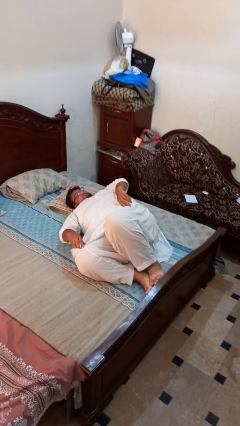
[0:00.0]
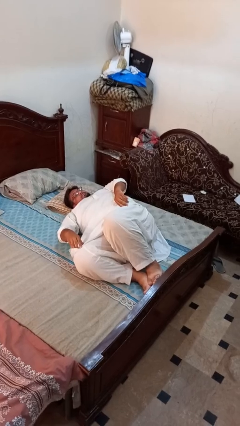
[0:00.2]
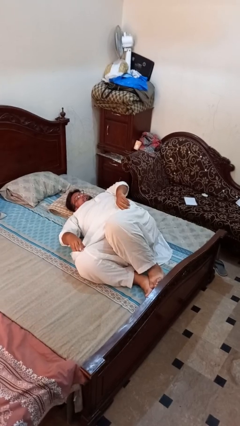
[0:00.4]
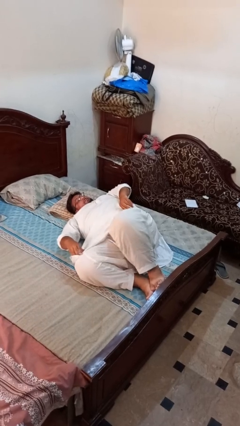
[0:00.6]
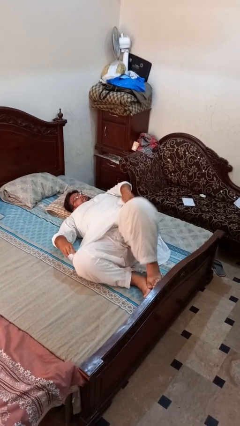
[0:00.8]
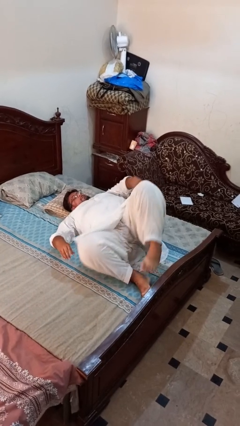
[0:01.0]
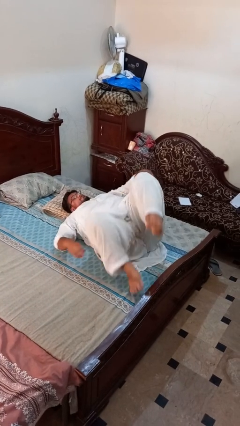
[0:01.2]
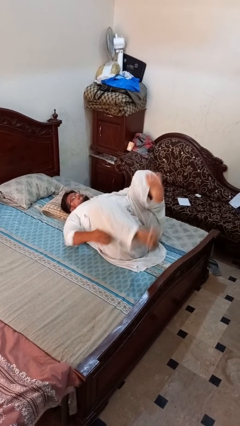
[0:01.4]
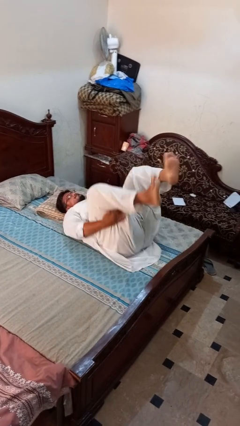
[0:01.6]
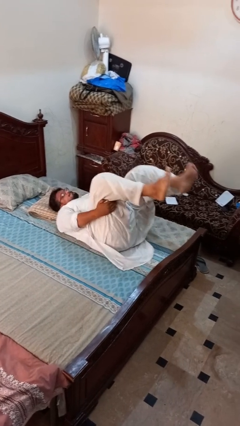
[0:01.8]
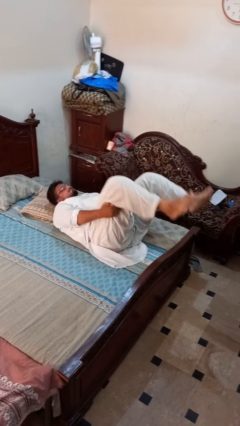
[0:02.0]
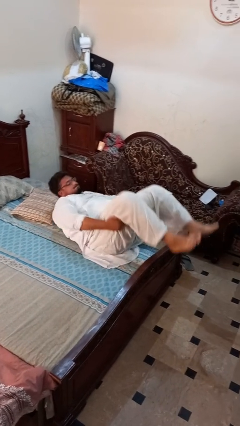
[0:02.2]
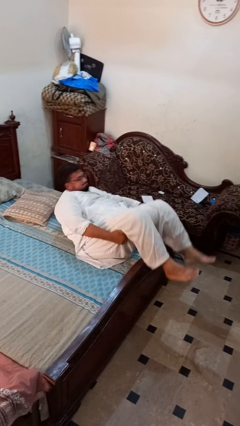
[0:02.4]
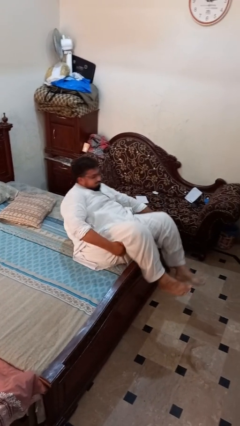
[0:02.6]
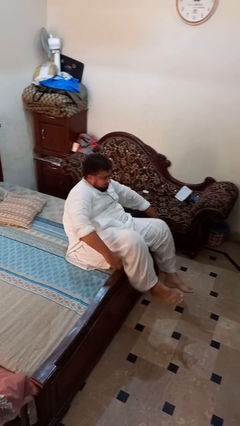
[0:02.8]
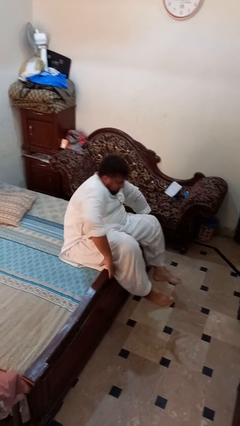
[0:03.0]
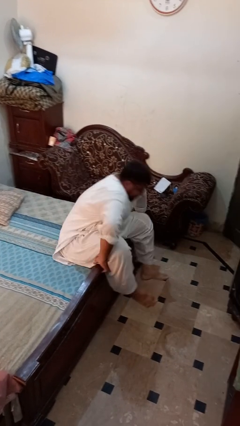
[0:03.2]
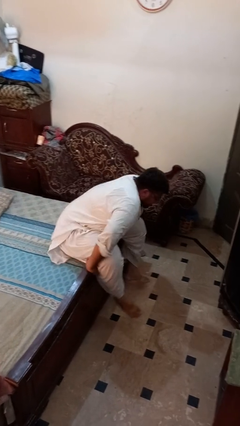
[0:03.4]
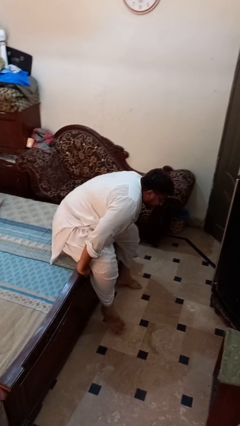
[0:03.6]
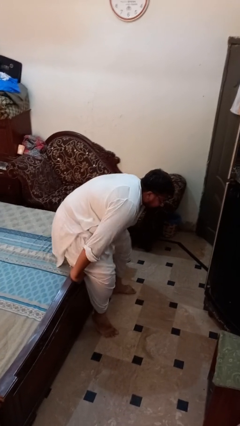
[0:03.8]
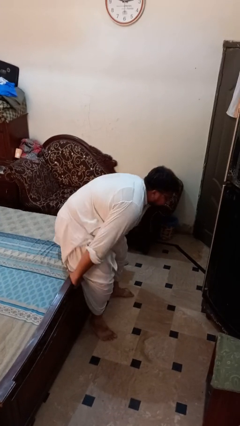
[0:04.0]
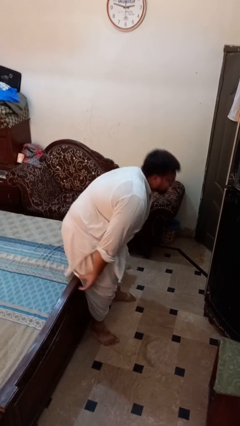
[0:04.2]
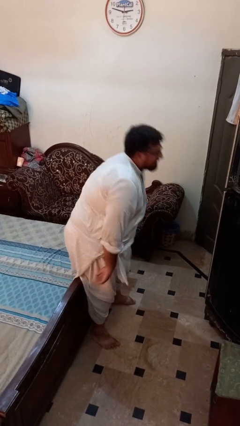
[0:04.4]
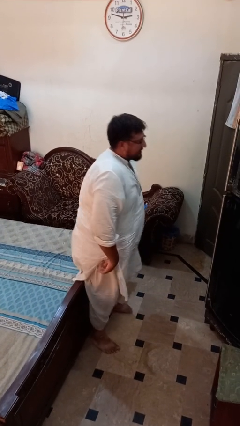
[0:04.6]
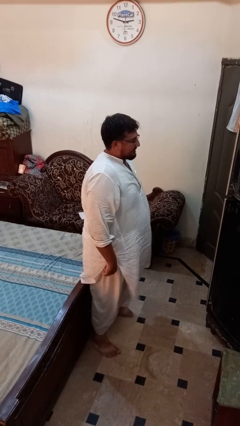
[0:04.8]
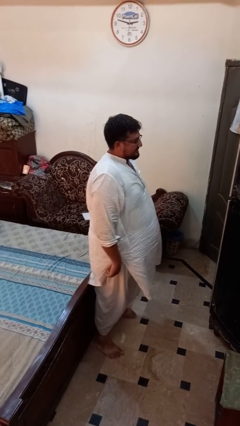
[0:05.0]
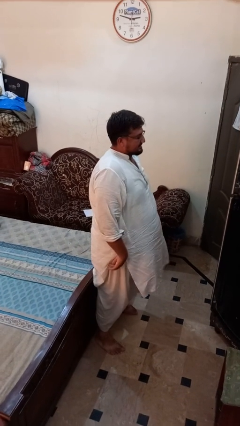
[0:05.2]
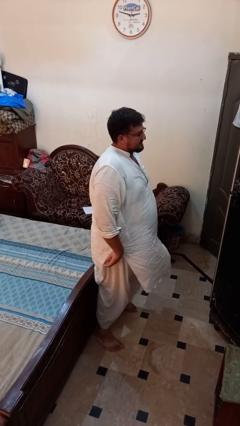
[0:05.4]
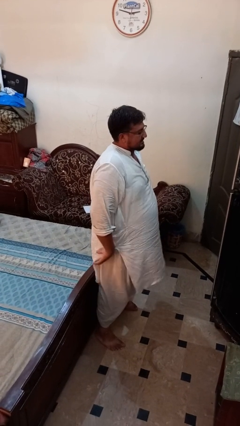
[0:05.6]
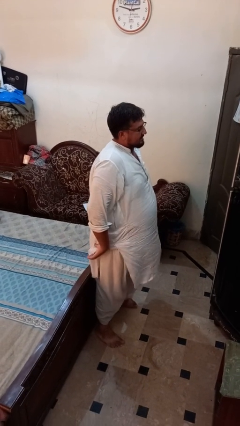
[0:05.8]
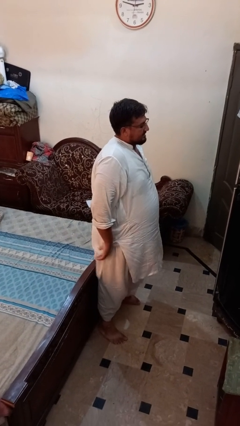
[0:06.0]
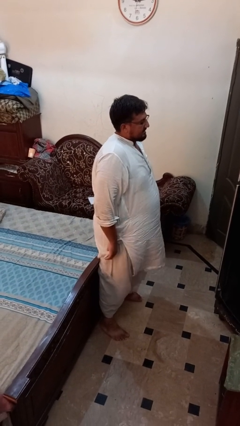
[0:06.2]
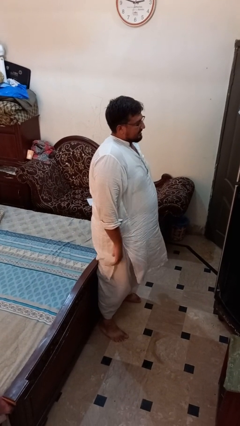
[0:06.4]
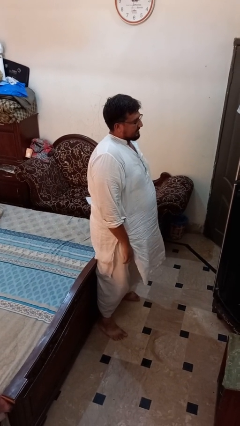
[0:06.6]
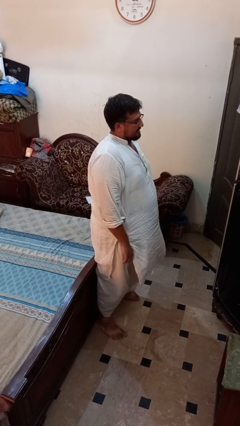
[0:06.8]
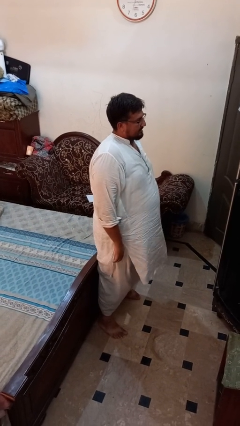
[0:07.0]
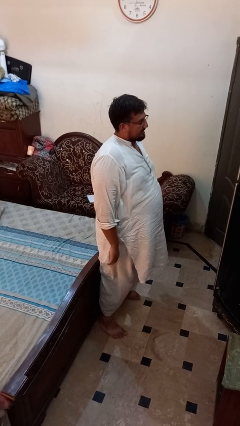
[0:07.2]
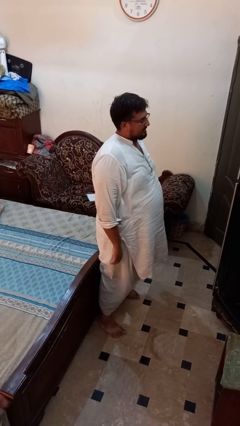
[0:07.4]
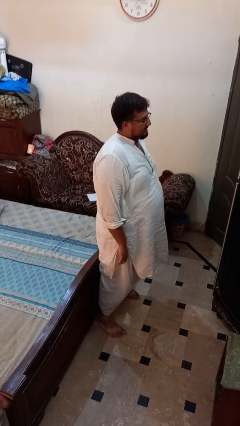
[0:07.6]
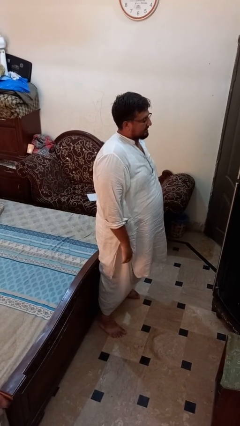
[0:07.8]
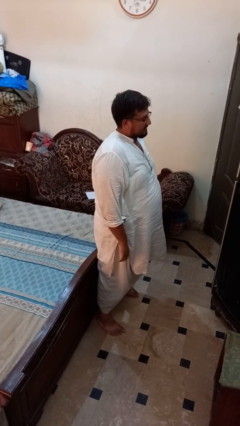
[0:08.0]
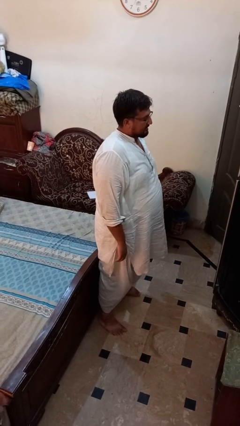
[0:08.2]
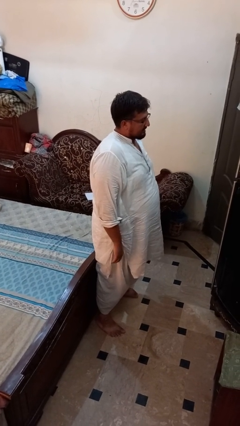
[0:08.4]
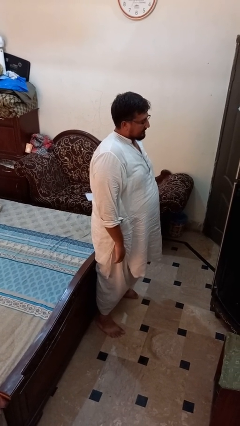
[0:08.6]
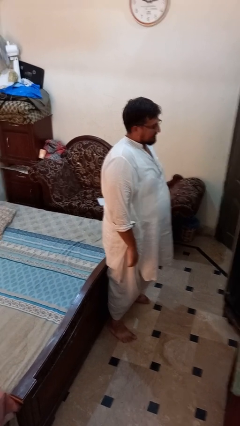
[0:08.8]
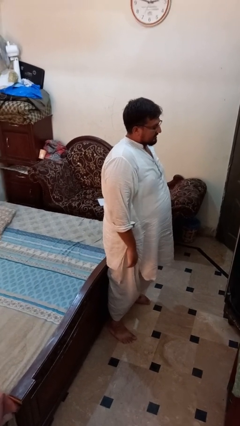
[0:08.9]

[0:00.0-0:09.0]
person stands up

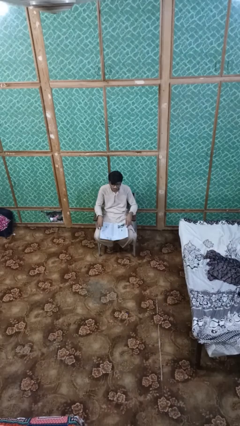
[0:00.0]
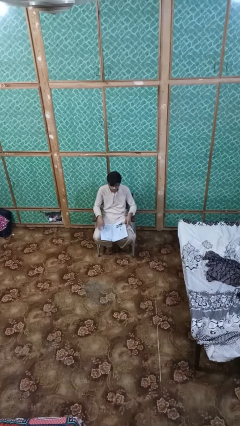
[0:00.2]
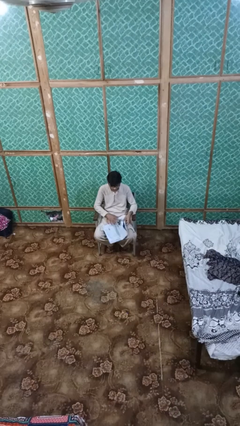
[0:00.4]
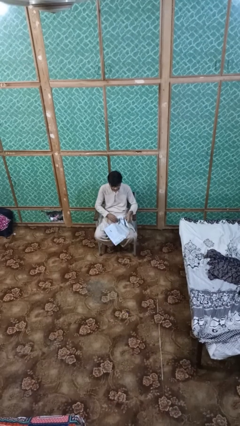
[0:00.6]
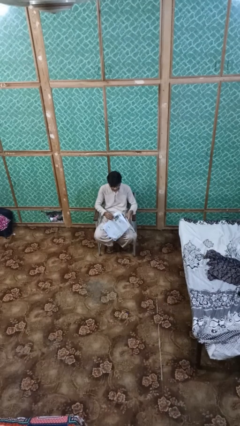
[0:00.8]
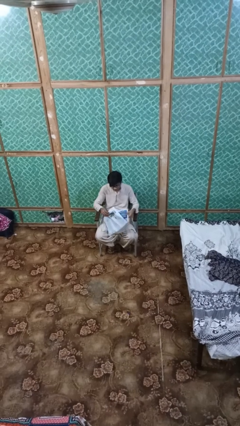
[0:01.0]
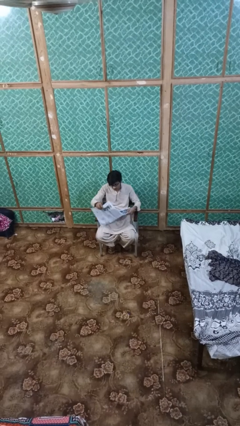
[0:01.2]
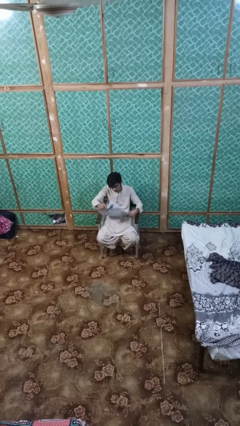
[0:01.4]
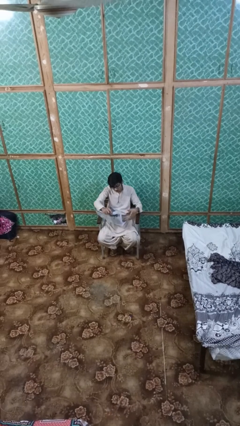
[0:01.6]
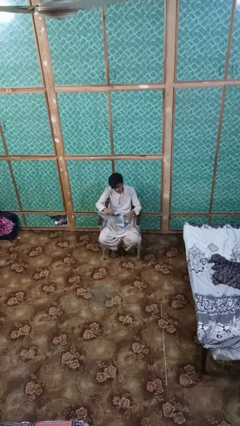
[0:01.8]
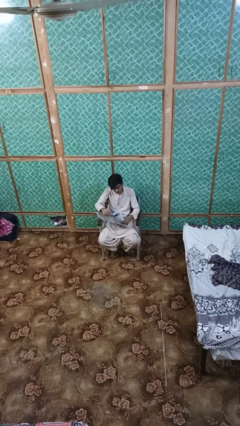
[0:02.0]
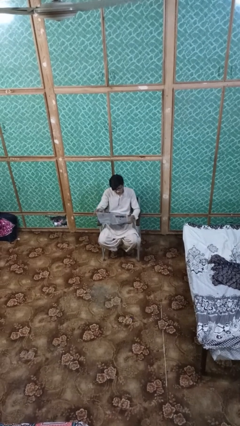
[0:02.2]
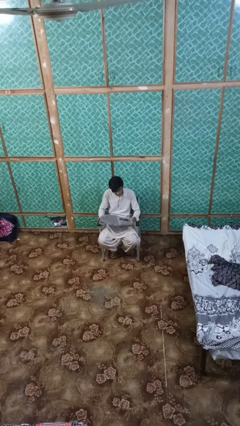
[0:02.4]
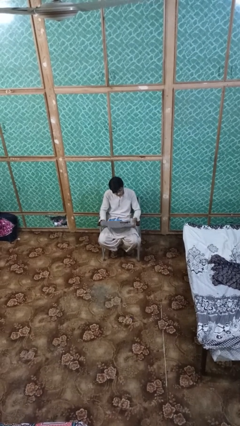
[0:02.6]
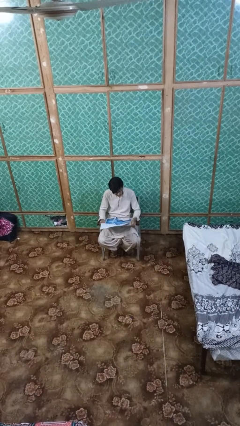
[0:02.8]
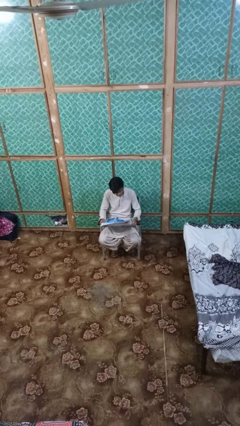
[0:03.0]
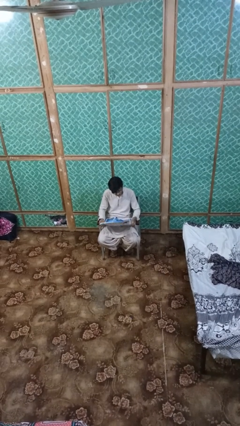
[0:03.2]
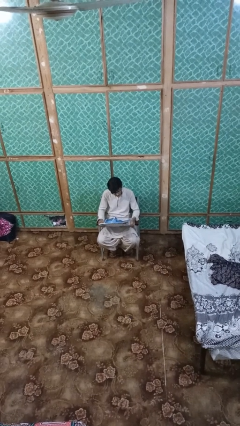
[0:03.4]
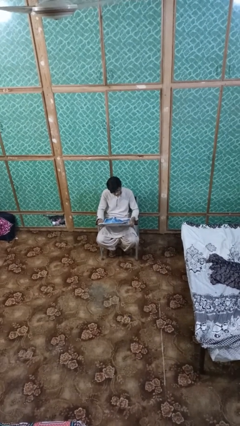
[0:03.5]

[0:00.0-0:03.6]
person reads newspaper

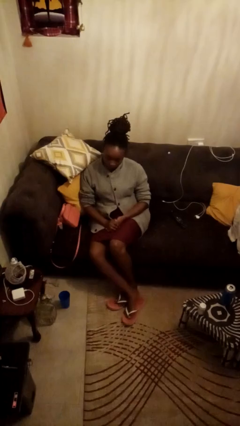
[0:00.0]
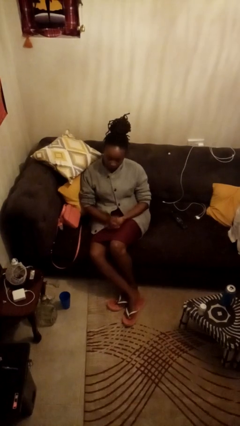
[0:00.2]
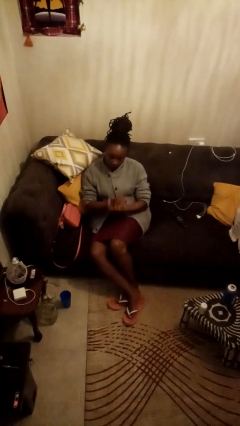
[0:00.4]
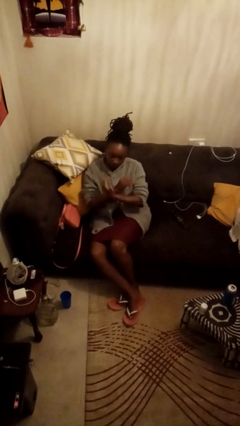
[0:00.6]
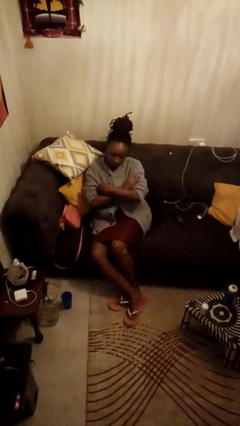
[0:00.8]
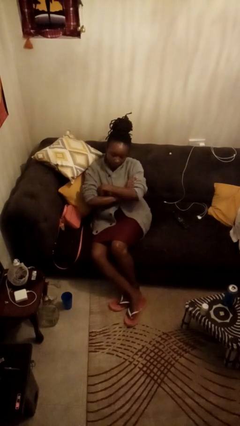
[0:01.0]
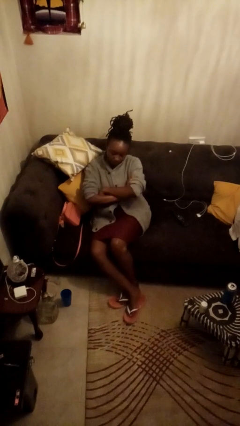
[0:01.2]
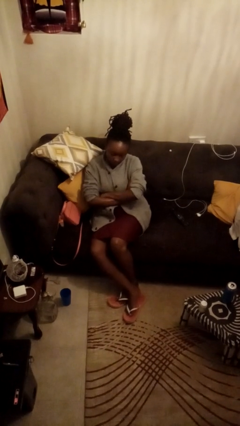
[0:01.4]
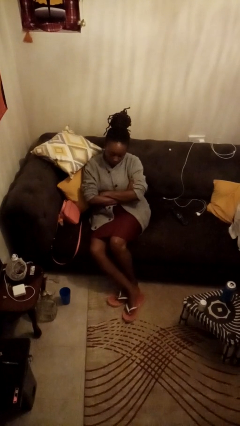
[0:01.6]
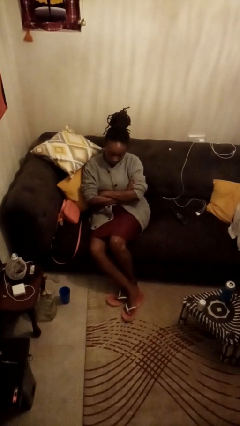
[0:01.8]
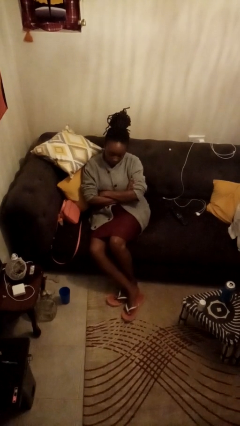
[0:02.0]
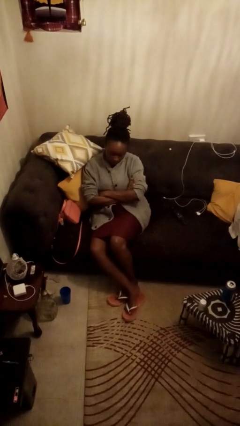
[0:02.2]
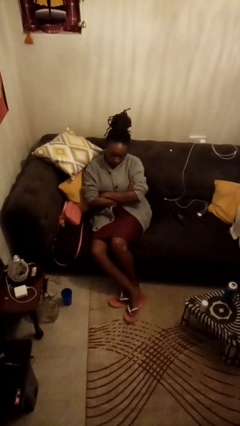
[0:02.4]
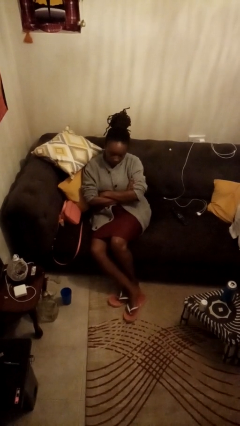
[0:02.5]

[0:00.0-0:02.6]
person crosses arms

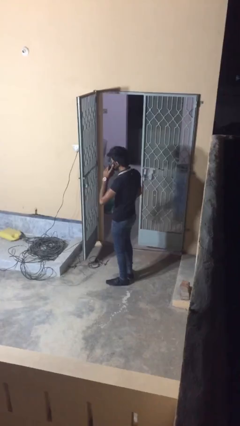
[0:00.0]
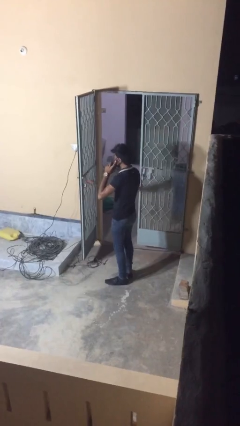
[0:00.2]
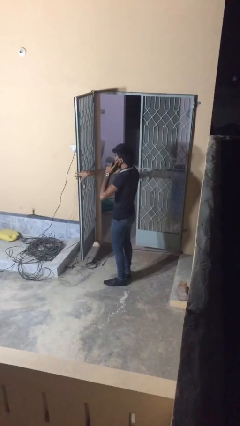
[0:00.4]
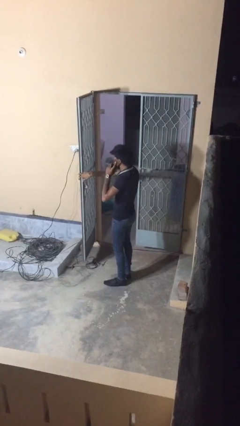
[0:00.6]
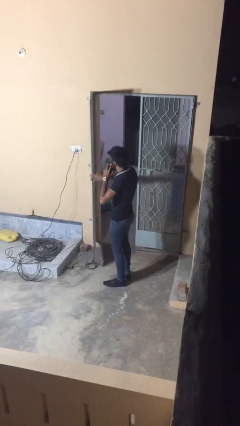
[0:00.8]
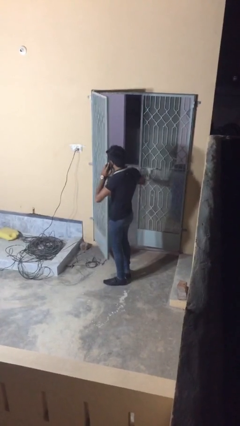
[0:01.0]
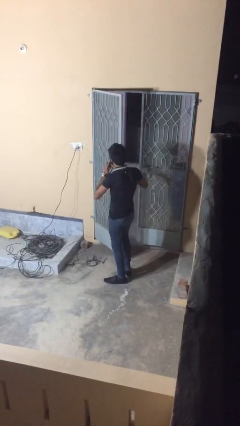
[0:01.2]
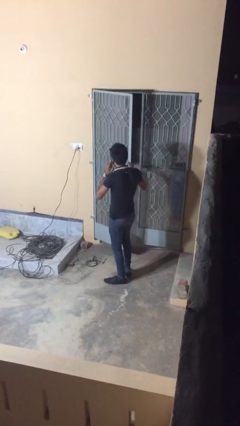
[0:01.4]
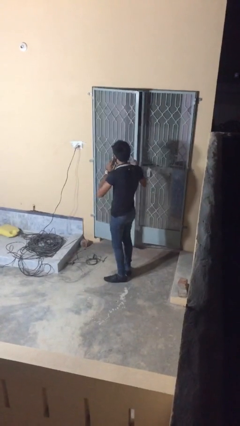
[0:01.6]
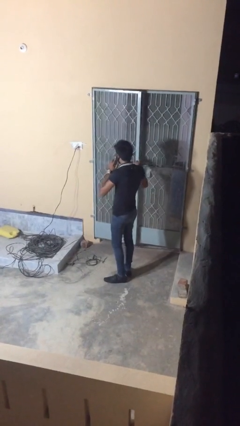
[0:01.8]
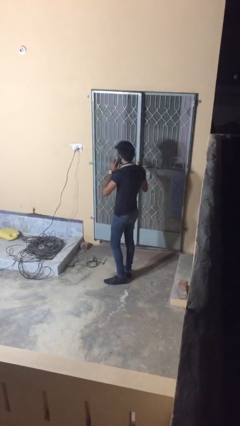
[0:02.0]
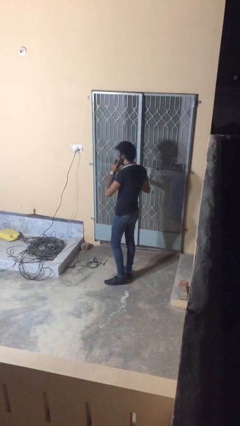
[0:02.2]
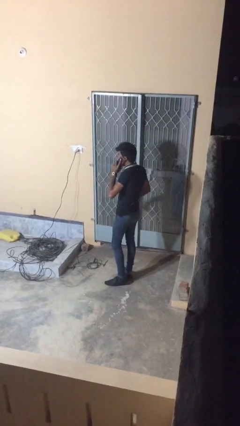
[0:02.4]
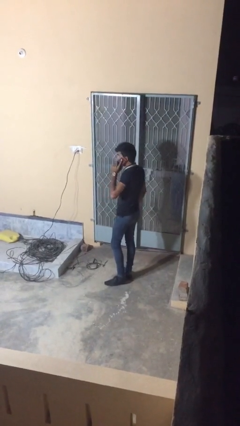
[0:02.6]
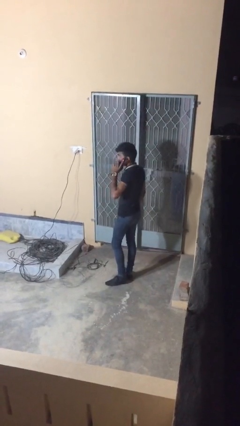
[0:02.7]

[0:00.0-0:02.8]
person closes facility door
